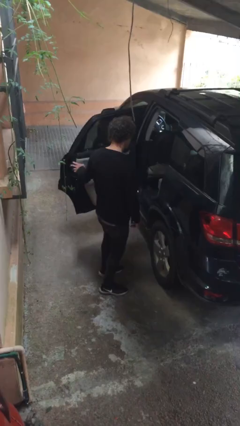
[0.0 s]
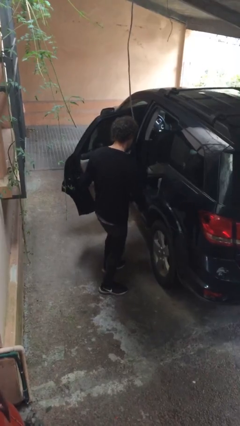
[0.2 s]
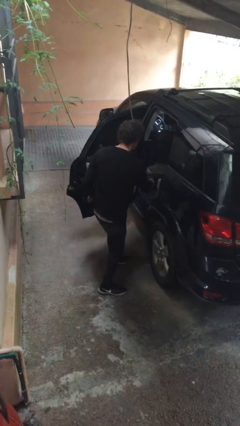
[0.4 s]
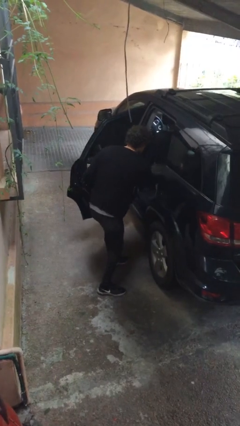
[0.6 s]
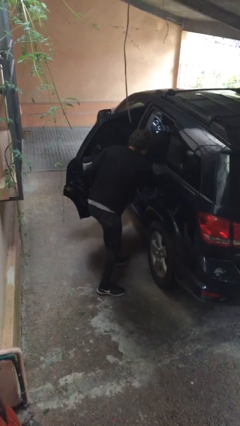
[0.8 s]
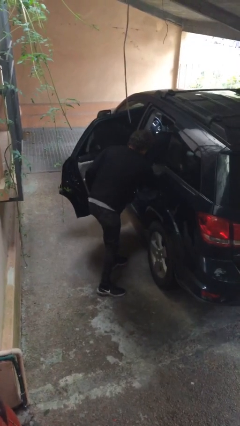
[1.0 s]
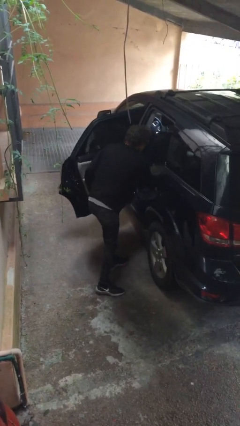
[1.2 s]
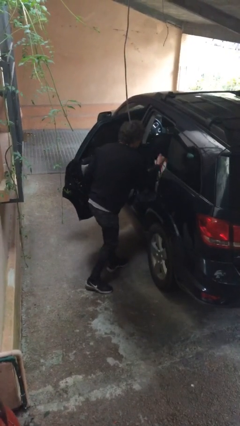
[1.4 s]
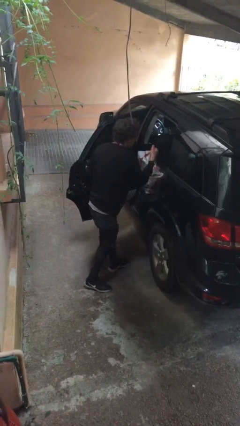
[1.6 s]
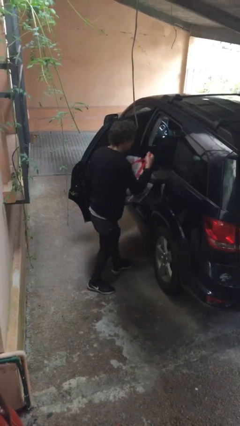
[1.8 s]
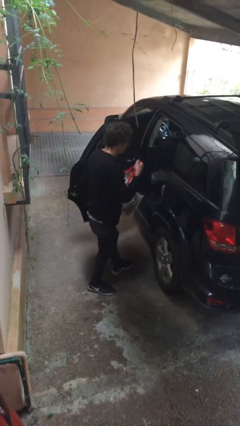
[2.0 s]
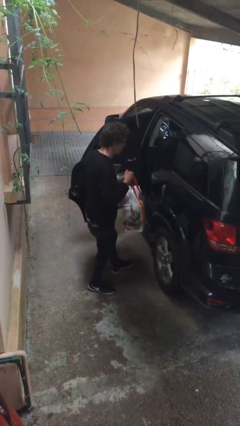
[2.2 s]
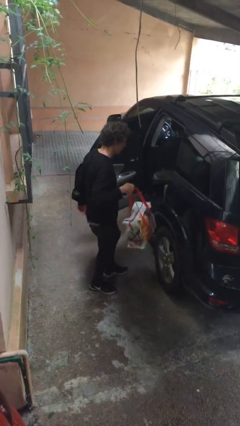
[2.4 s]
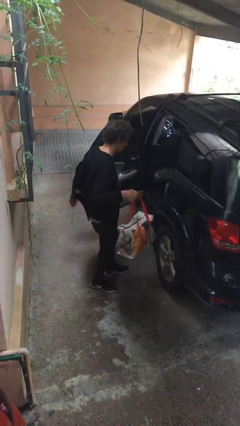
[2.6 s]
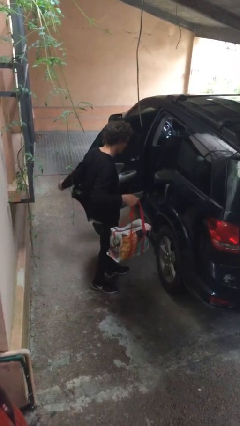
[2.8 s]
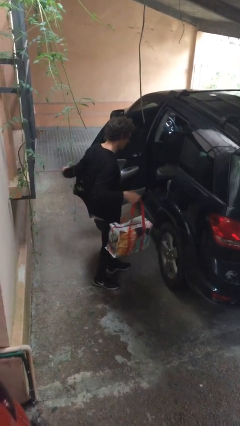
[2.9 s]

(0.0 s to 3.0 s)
person unloads car

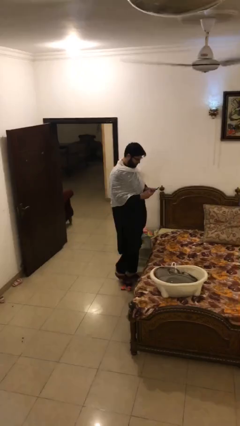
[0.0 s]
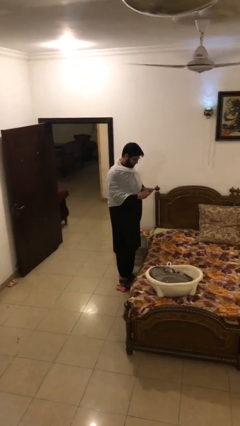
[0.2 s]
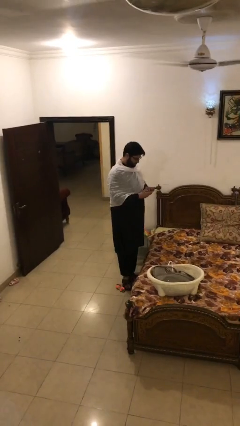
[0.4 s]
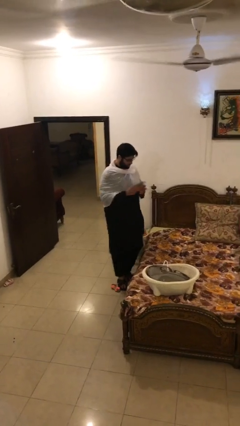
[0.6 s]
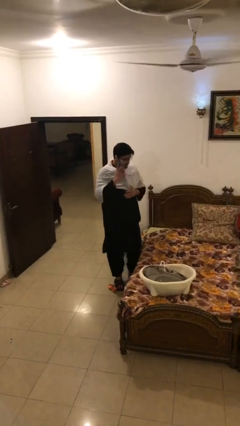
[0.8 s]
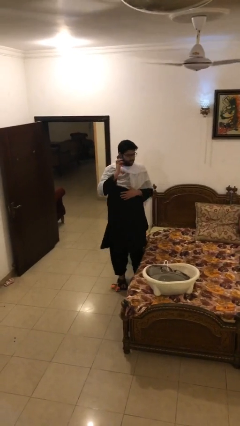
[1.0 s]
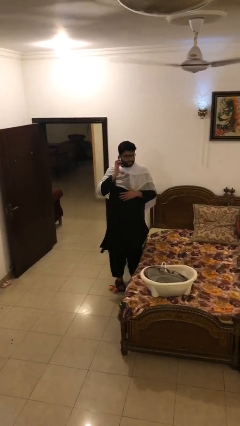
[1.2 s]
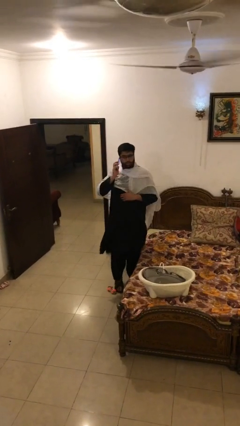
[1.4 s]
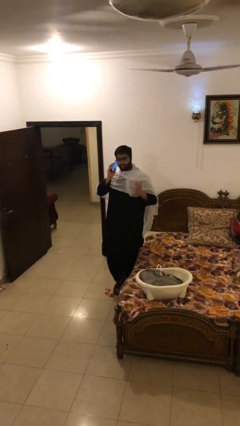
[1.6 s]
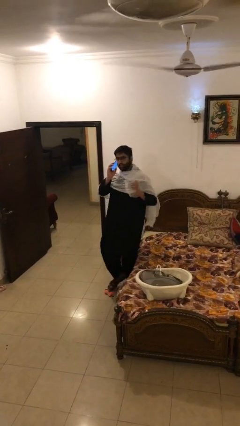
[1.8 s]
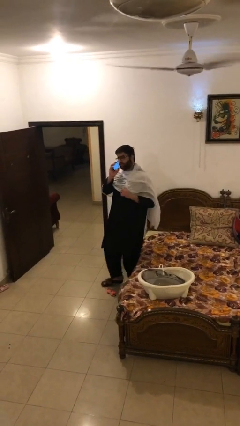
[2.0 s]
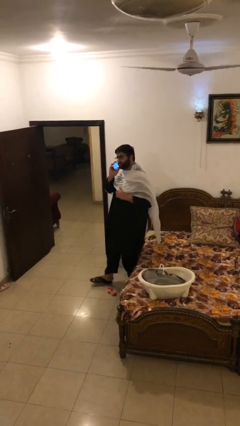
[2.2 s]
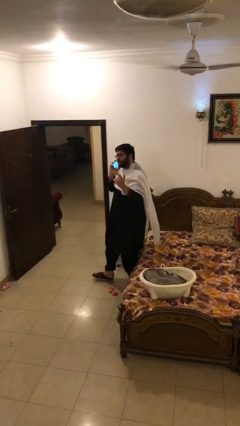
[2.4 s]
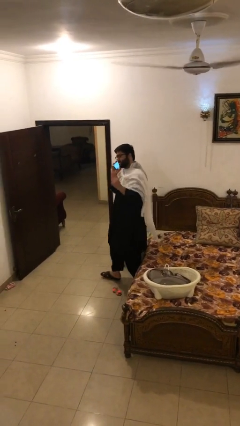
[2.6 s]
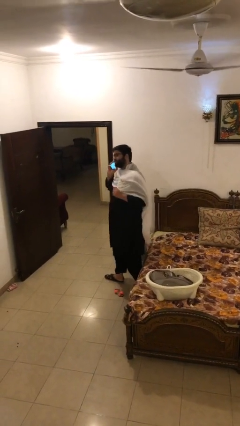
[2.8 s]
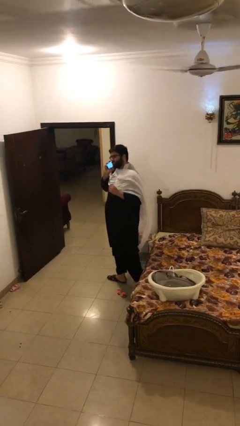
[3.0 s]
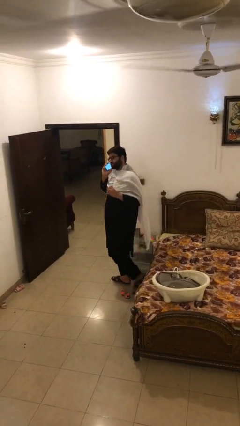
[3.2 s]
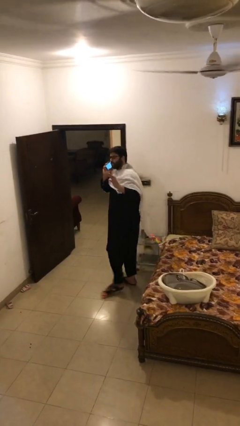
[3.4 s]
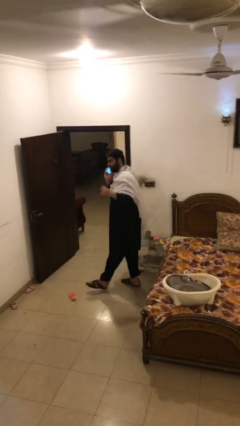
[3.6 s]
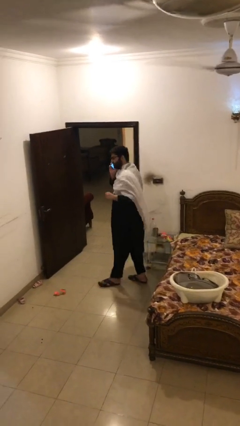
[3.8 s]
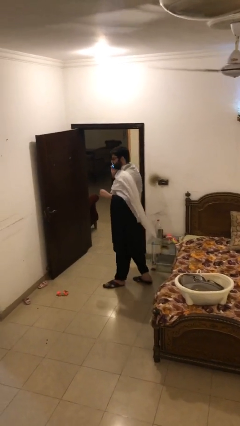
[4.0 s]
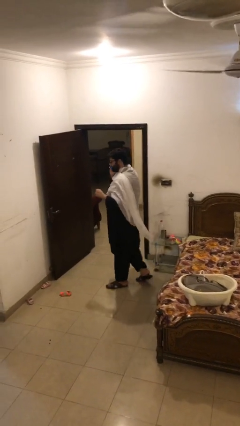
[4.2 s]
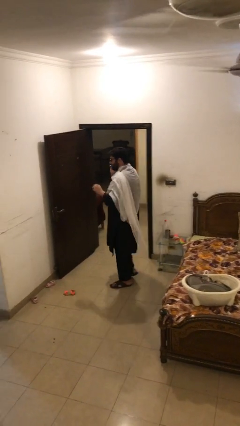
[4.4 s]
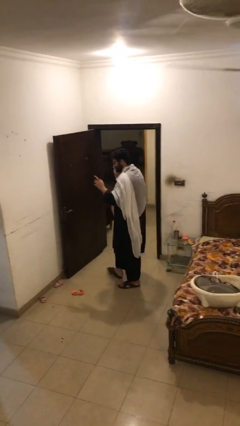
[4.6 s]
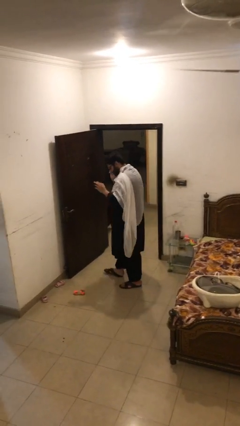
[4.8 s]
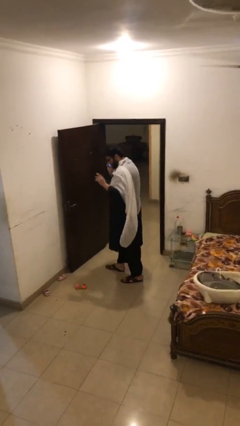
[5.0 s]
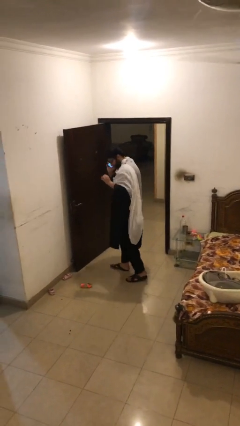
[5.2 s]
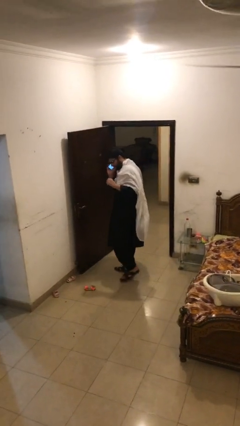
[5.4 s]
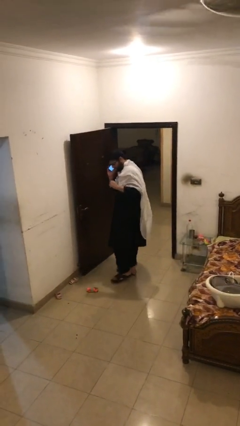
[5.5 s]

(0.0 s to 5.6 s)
person talks on phone

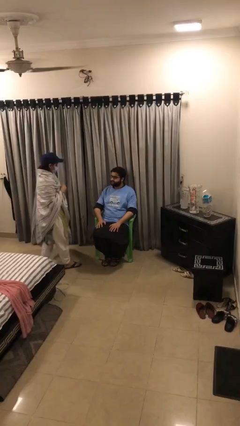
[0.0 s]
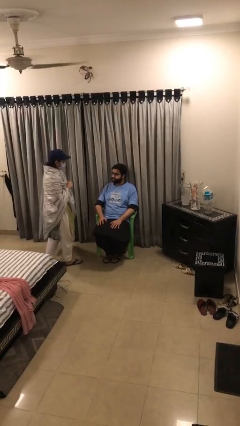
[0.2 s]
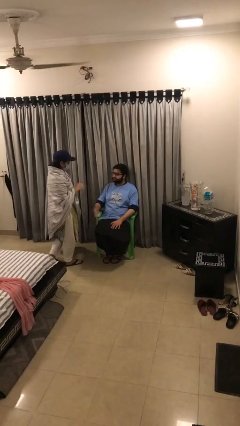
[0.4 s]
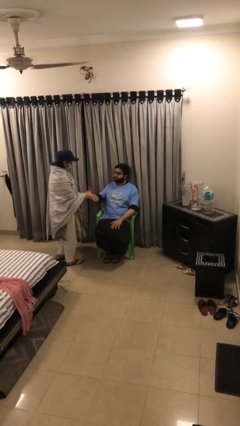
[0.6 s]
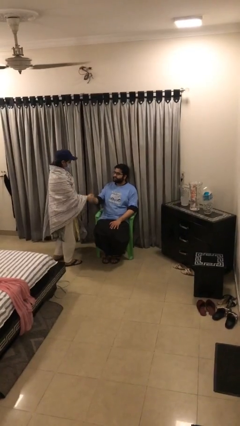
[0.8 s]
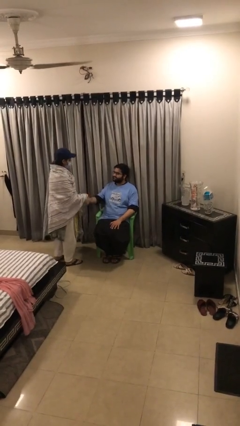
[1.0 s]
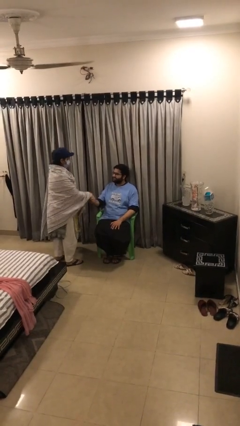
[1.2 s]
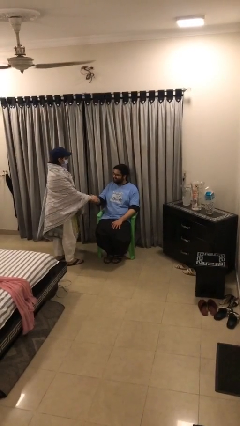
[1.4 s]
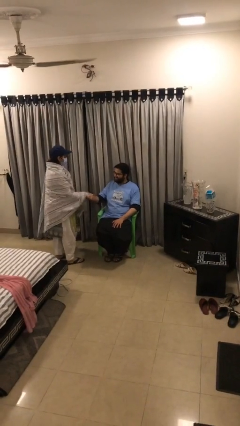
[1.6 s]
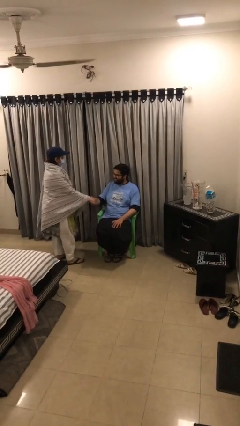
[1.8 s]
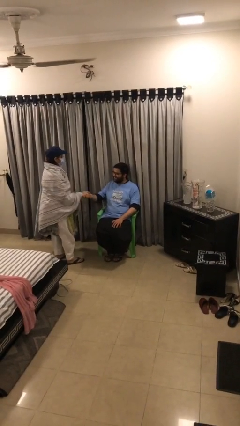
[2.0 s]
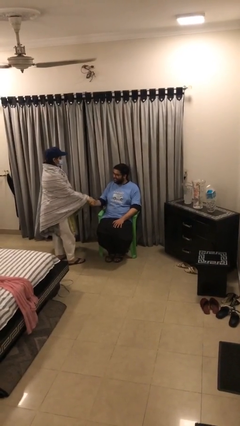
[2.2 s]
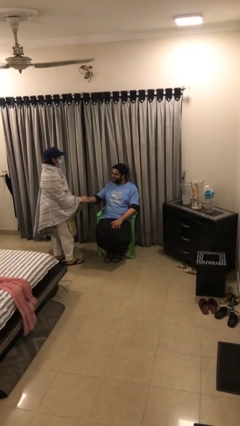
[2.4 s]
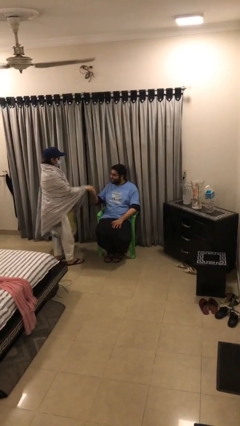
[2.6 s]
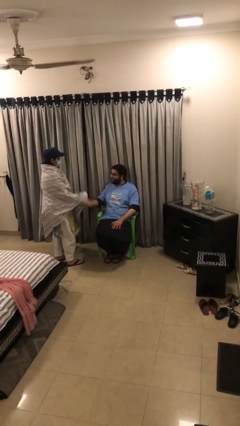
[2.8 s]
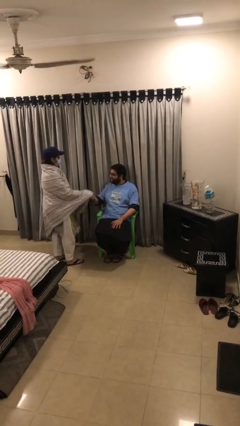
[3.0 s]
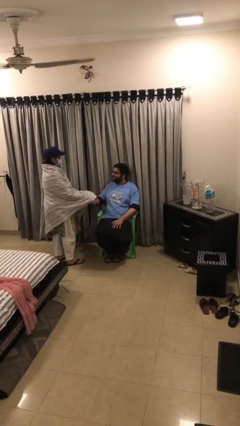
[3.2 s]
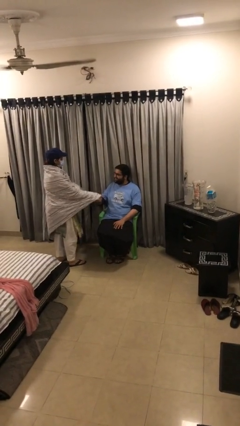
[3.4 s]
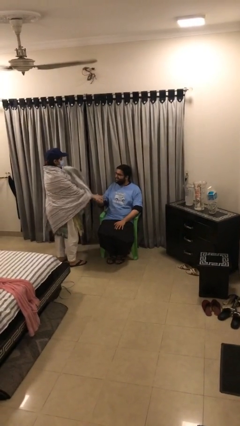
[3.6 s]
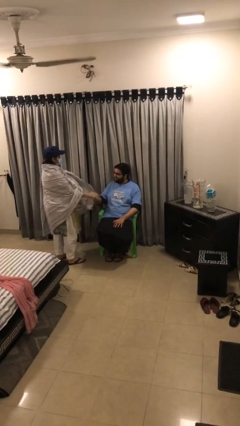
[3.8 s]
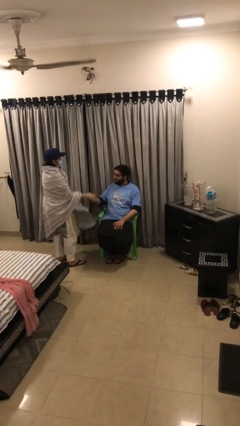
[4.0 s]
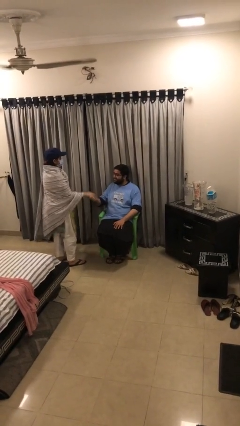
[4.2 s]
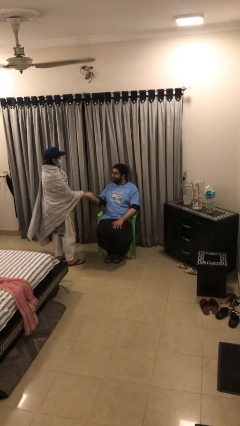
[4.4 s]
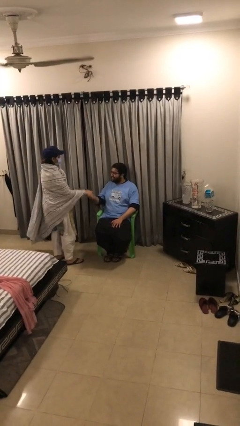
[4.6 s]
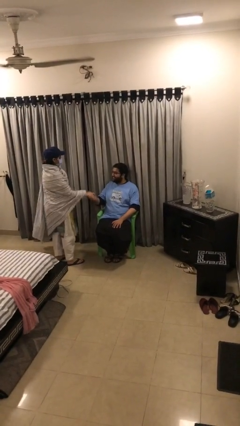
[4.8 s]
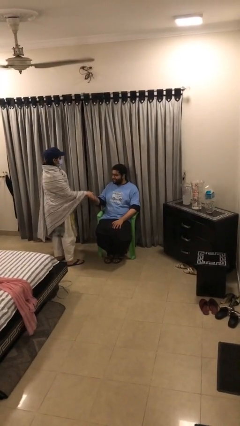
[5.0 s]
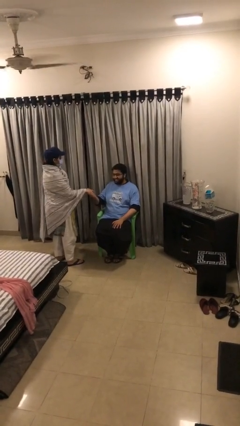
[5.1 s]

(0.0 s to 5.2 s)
person shakes hand

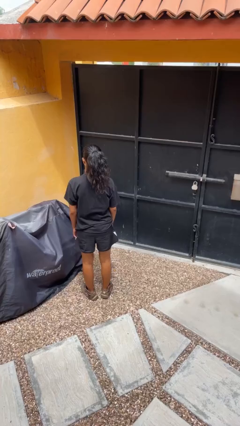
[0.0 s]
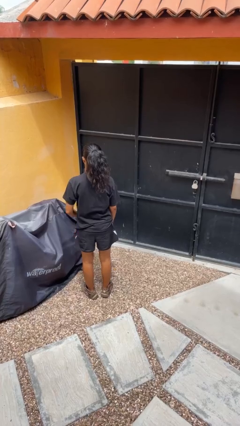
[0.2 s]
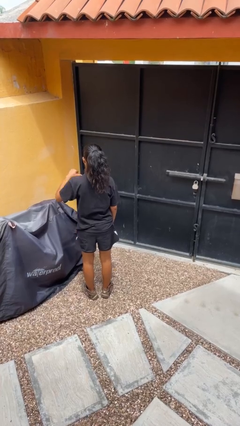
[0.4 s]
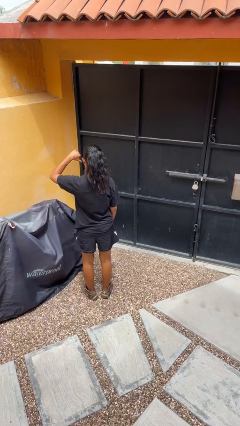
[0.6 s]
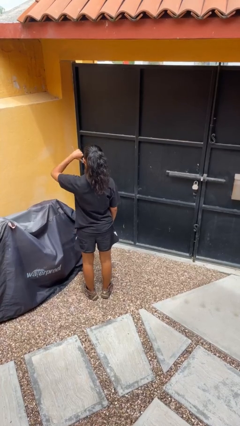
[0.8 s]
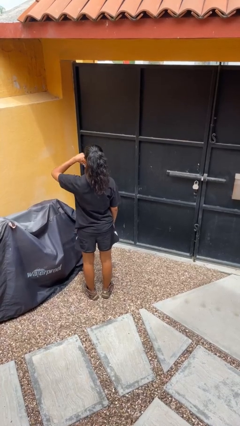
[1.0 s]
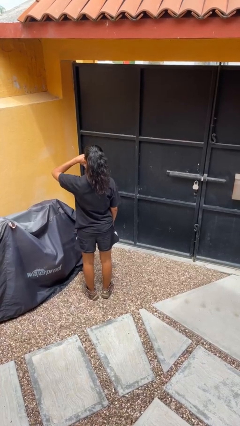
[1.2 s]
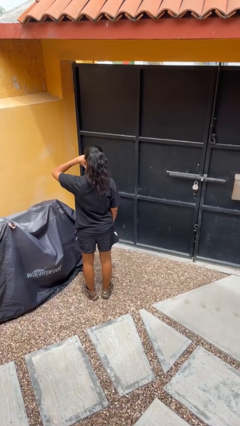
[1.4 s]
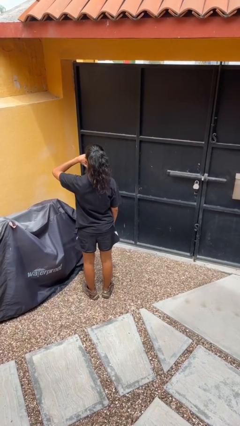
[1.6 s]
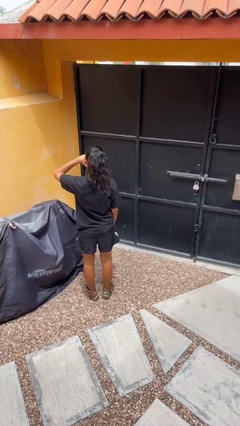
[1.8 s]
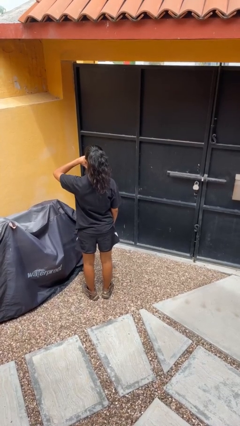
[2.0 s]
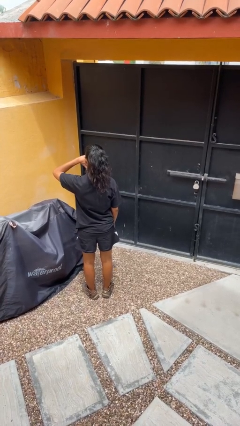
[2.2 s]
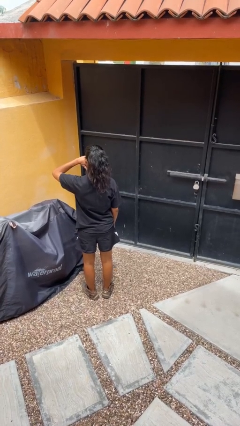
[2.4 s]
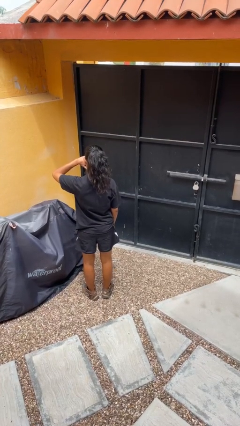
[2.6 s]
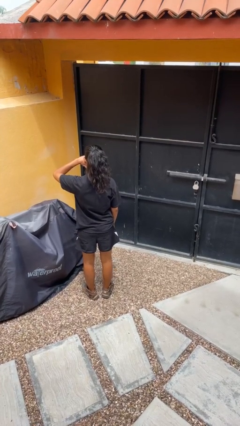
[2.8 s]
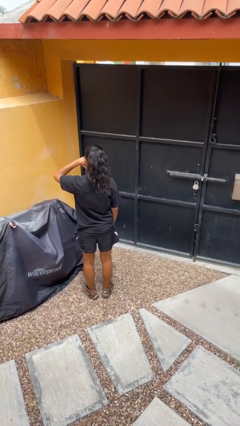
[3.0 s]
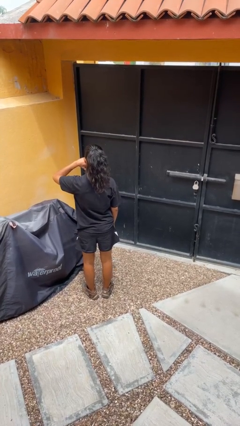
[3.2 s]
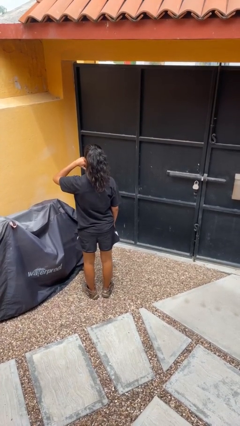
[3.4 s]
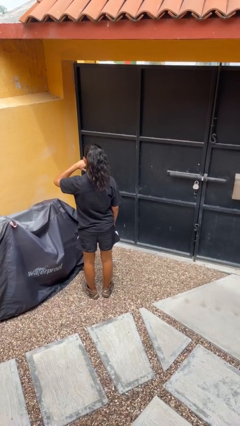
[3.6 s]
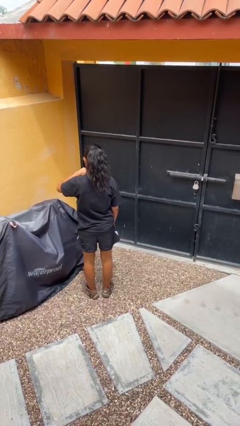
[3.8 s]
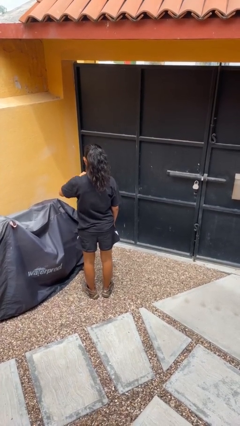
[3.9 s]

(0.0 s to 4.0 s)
person gestures thumbs down
